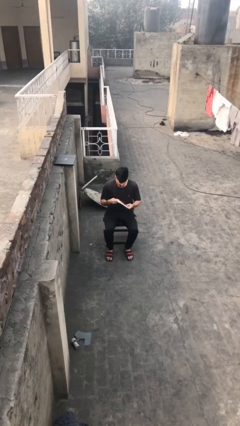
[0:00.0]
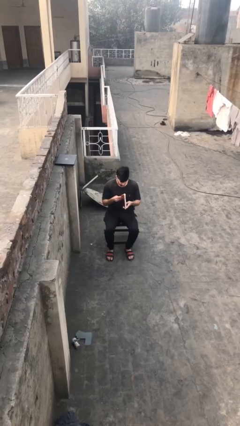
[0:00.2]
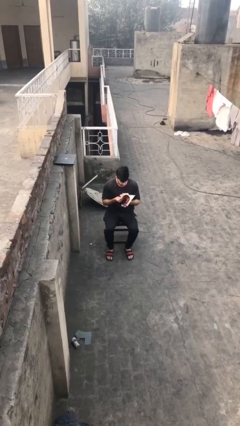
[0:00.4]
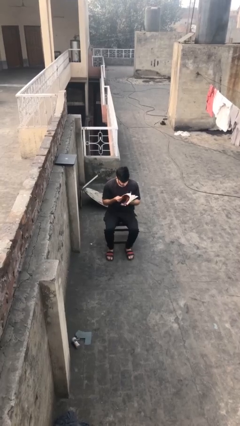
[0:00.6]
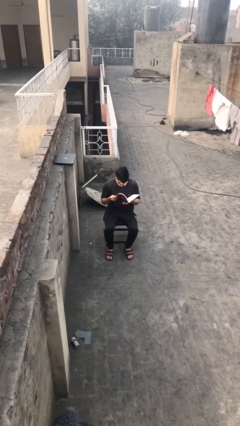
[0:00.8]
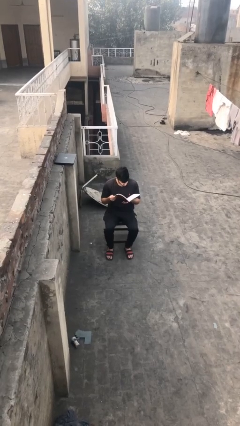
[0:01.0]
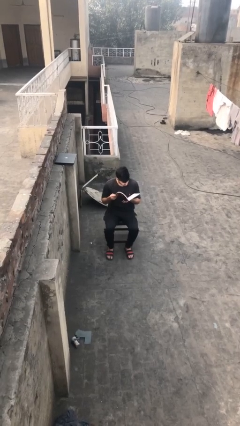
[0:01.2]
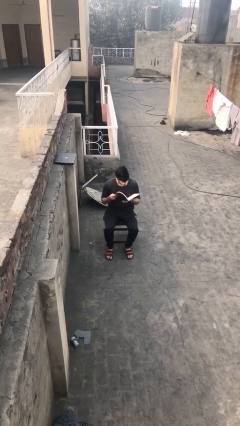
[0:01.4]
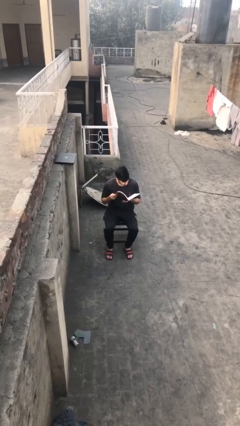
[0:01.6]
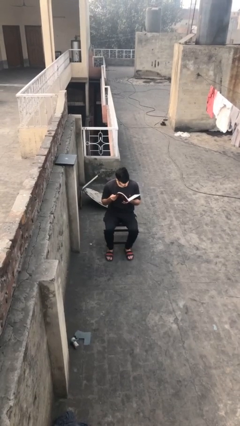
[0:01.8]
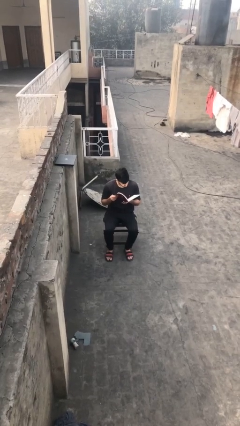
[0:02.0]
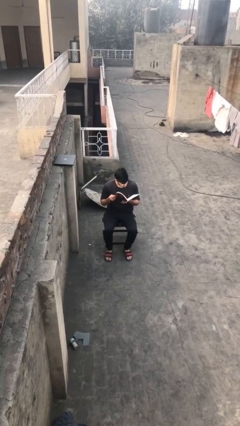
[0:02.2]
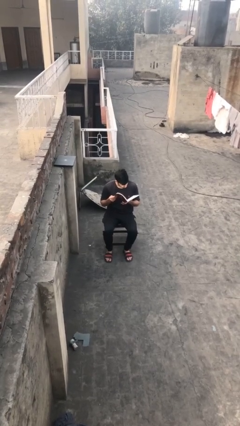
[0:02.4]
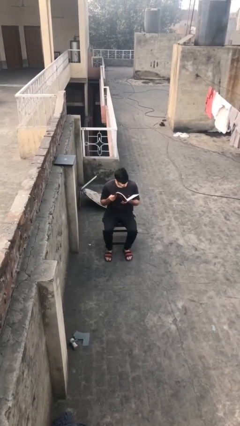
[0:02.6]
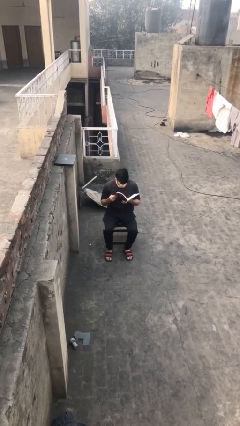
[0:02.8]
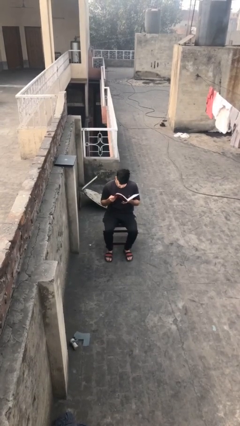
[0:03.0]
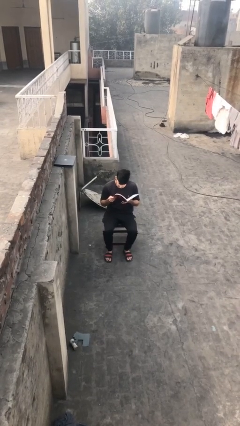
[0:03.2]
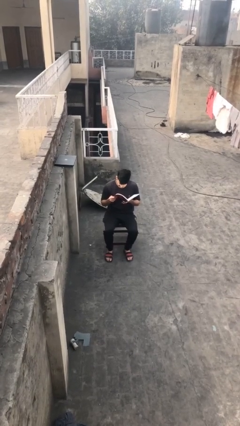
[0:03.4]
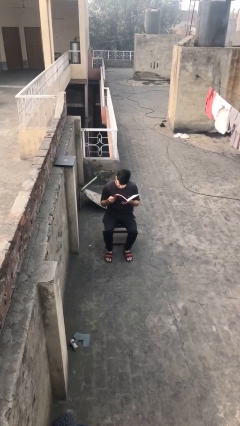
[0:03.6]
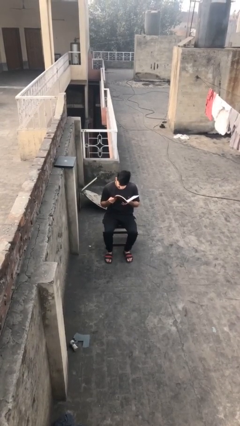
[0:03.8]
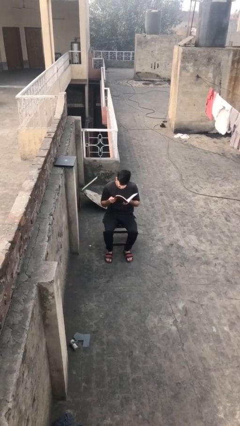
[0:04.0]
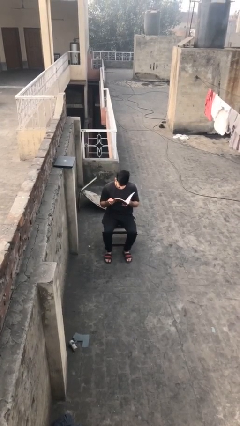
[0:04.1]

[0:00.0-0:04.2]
person reads document

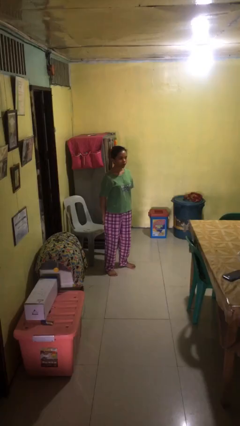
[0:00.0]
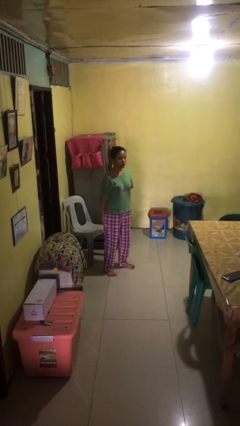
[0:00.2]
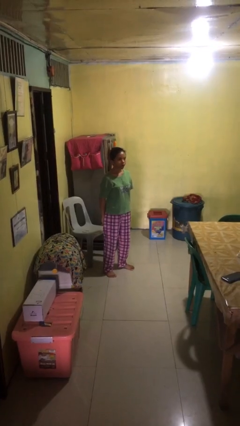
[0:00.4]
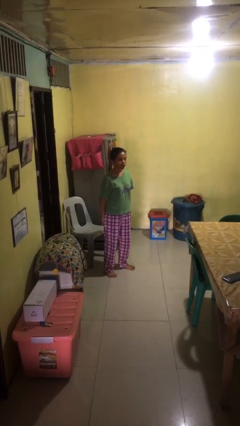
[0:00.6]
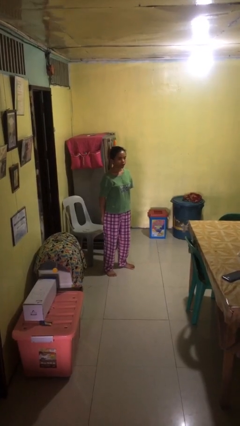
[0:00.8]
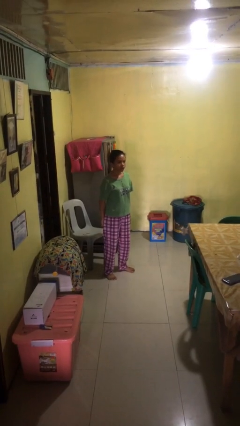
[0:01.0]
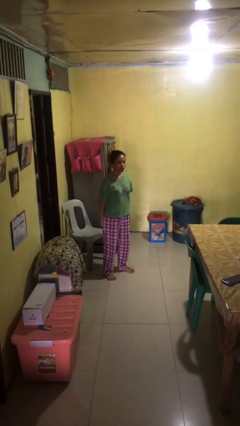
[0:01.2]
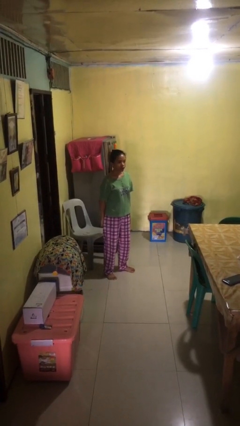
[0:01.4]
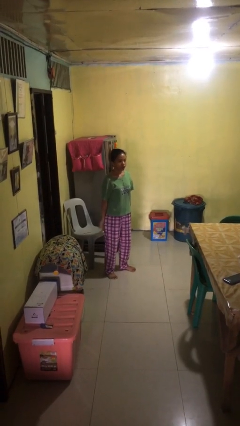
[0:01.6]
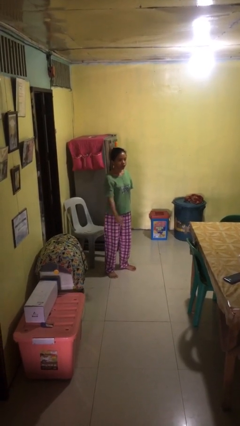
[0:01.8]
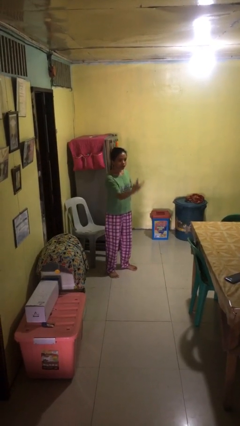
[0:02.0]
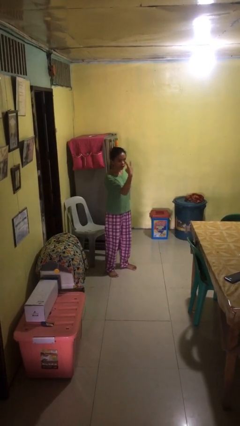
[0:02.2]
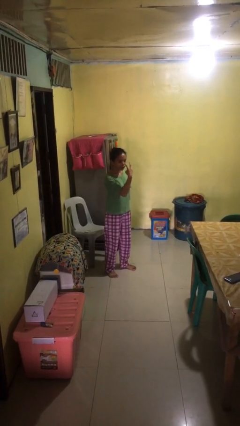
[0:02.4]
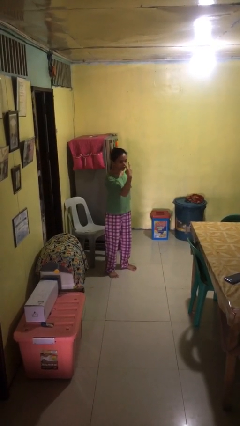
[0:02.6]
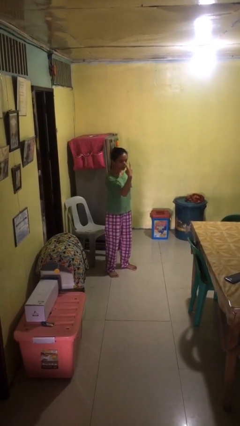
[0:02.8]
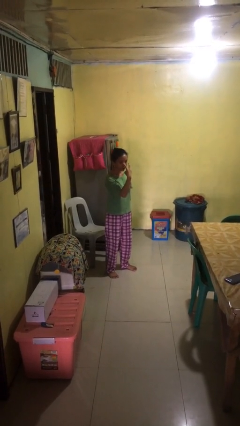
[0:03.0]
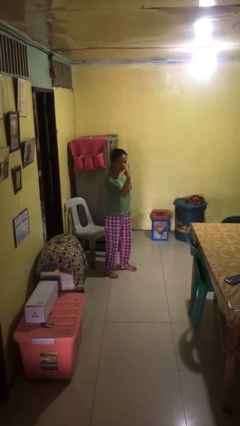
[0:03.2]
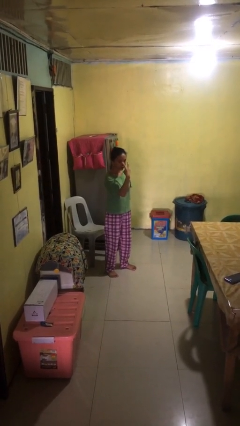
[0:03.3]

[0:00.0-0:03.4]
person gestures watch closely

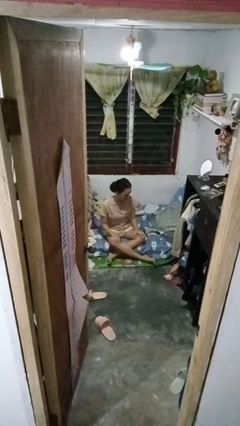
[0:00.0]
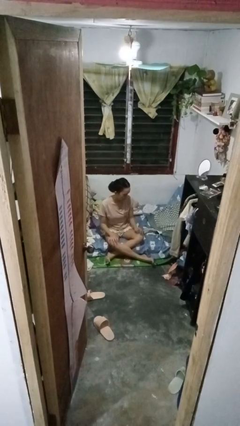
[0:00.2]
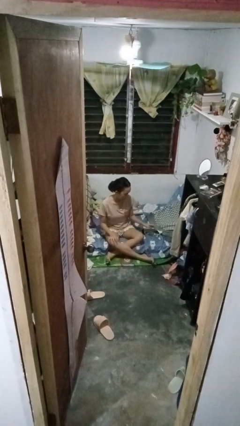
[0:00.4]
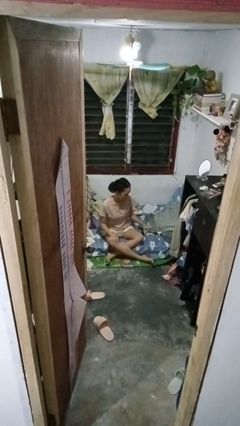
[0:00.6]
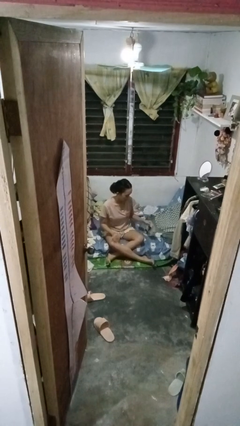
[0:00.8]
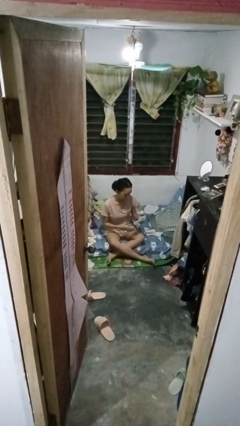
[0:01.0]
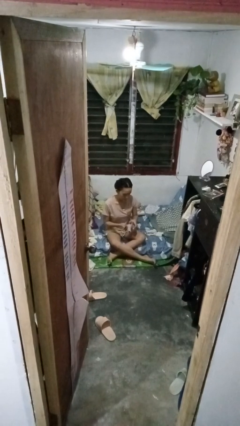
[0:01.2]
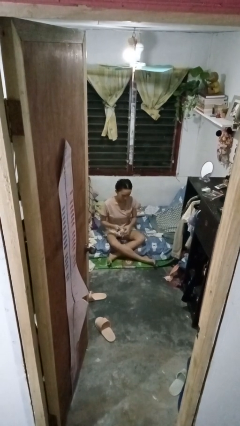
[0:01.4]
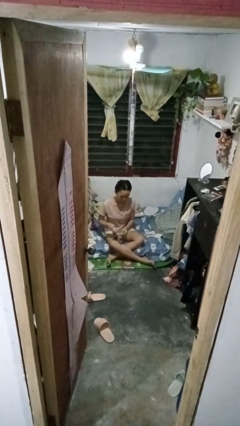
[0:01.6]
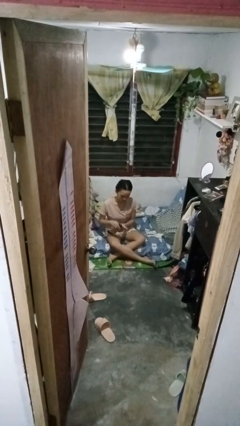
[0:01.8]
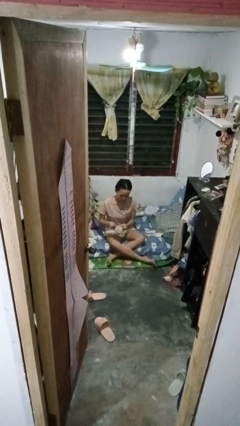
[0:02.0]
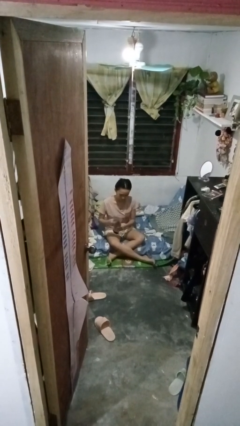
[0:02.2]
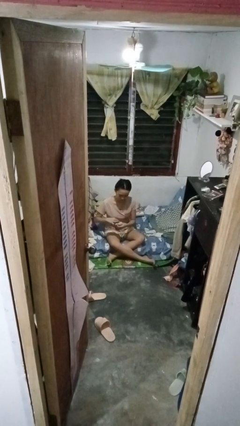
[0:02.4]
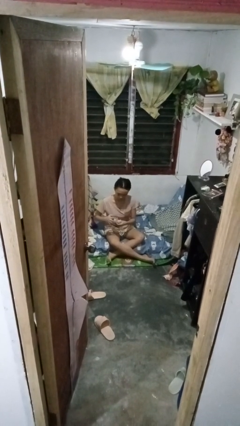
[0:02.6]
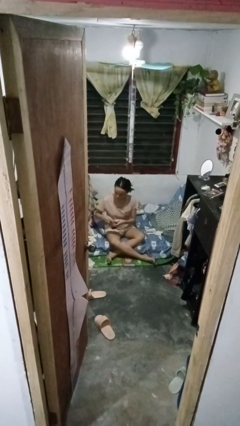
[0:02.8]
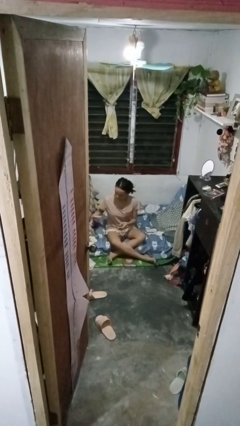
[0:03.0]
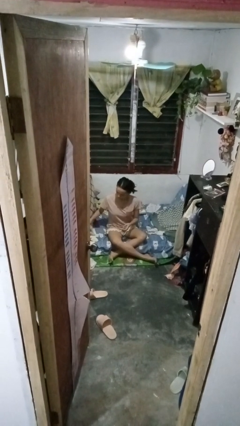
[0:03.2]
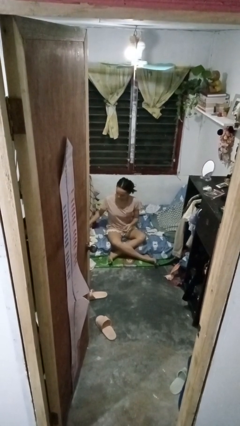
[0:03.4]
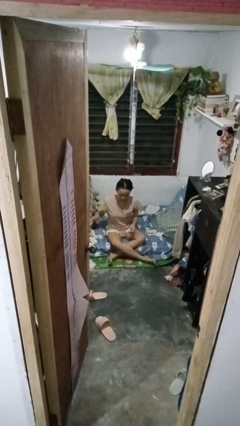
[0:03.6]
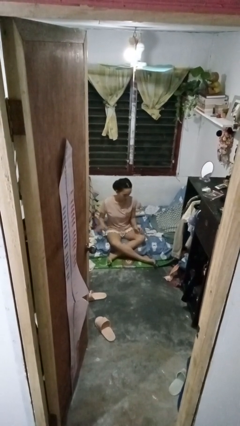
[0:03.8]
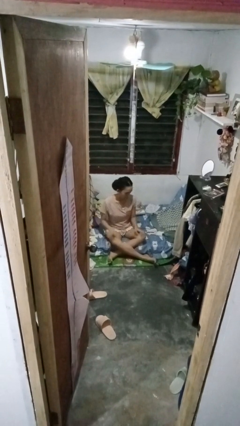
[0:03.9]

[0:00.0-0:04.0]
person folds socks

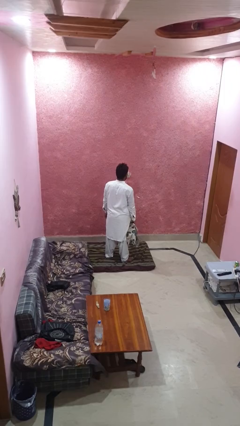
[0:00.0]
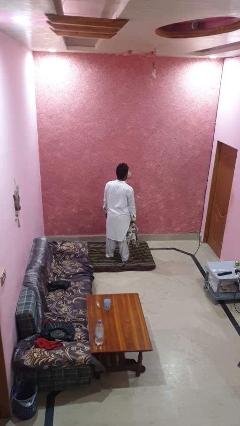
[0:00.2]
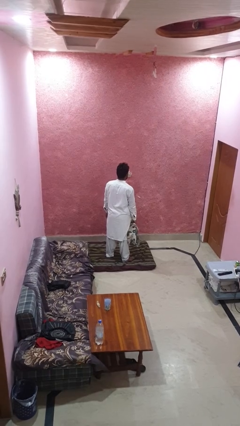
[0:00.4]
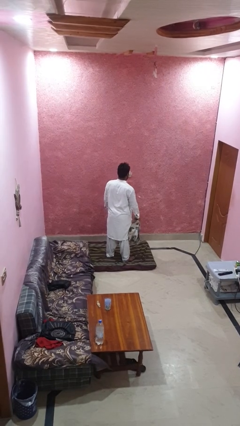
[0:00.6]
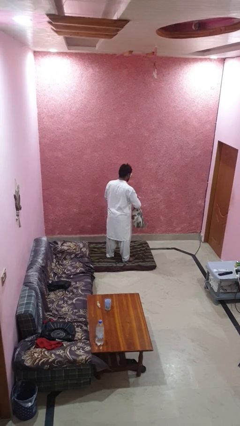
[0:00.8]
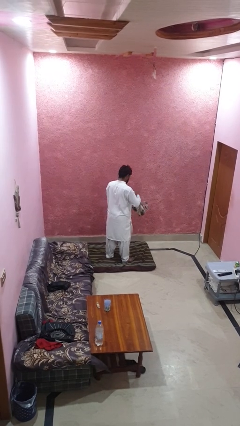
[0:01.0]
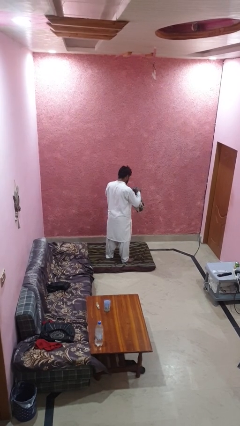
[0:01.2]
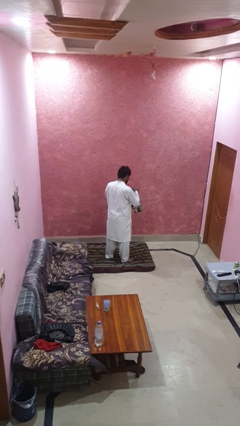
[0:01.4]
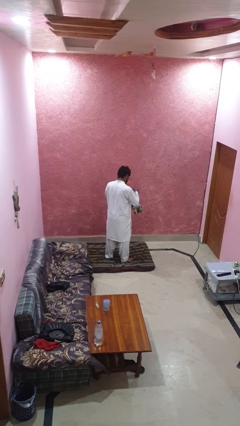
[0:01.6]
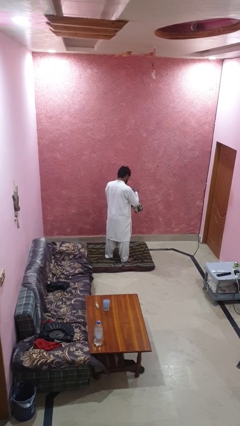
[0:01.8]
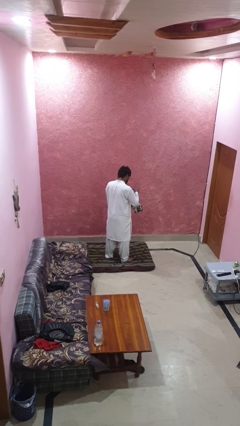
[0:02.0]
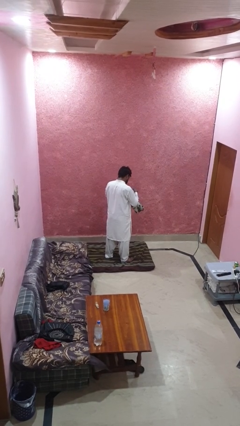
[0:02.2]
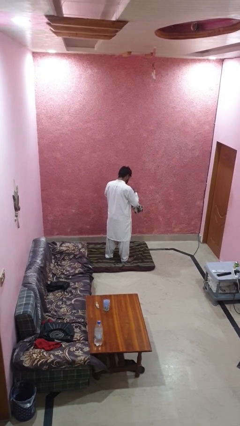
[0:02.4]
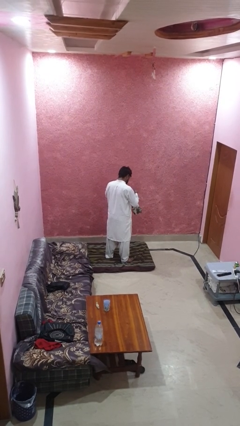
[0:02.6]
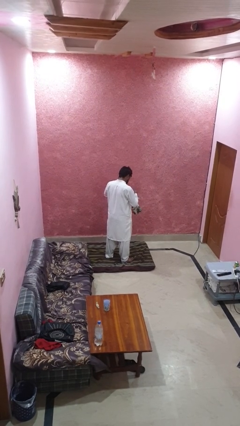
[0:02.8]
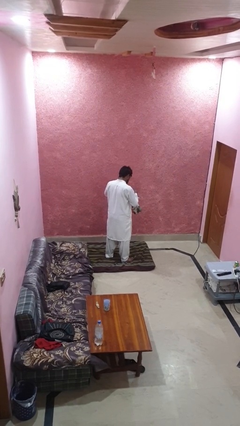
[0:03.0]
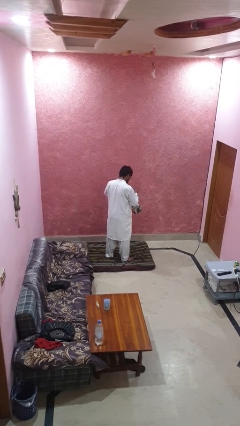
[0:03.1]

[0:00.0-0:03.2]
person searches in backpack

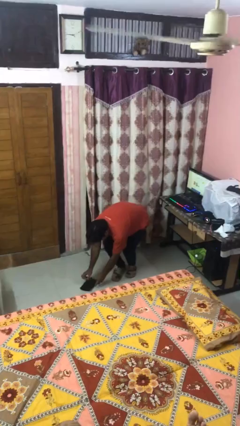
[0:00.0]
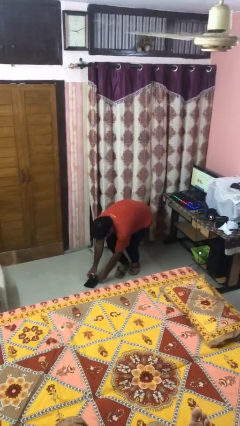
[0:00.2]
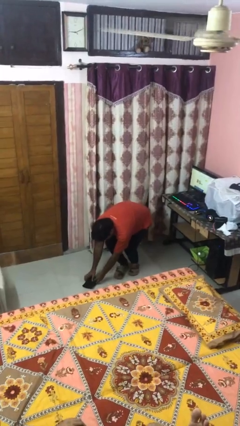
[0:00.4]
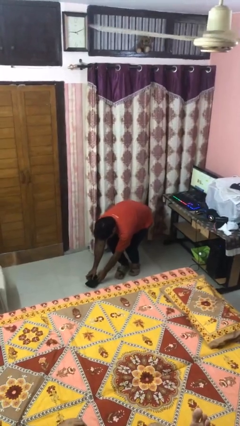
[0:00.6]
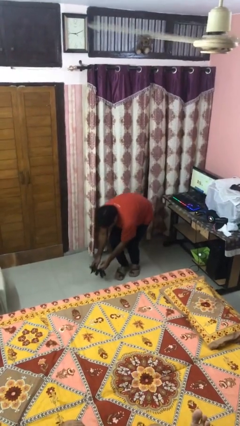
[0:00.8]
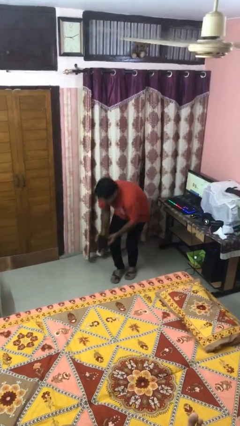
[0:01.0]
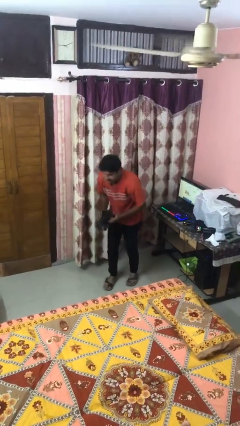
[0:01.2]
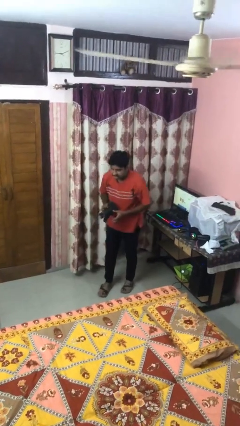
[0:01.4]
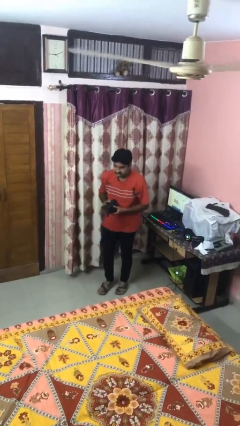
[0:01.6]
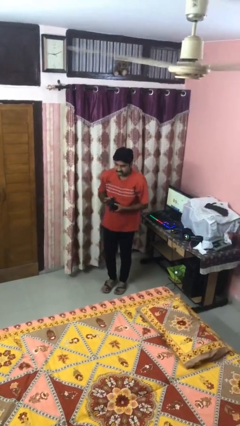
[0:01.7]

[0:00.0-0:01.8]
person picks up object from floor

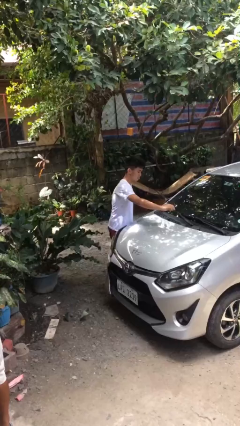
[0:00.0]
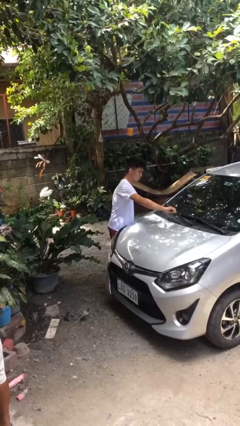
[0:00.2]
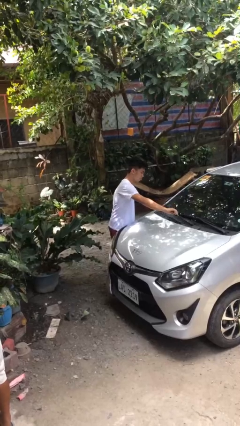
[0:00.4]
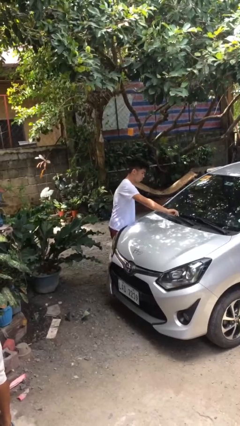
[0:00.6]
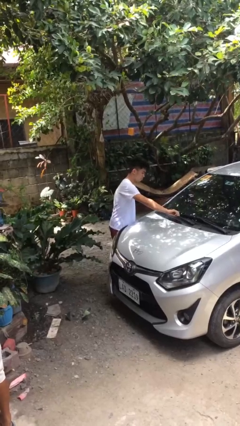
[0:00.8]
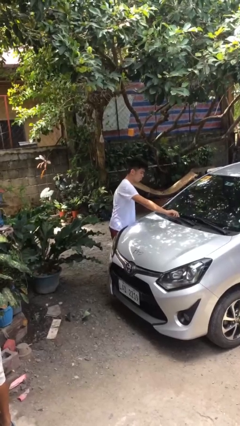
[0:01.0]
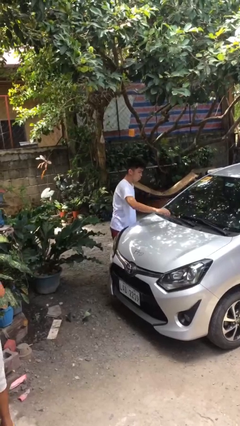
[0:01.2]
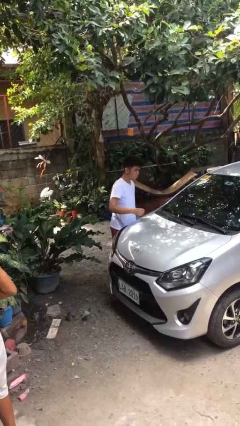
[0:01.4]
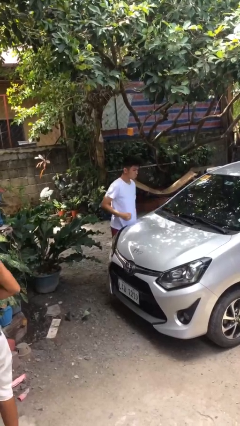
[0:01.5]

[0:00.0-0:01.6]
person flips down car wipers
